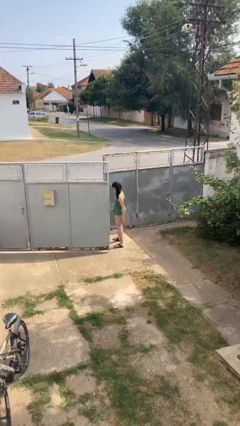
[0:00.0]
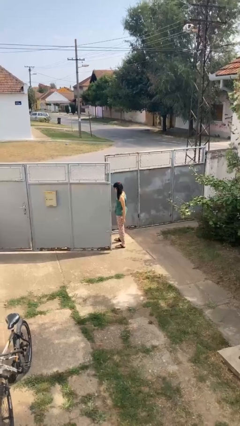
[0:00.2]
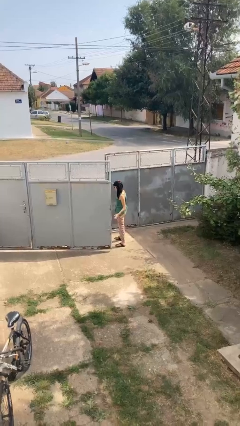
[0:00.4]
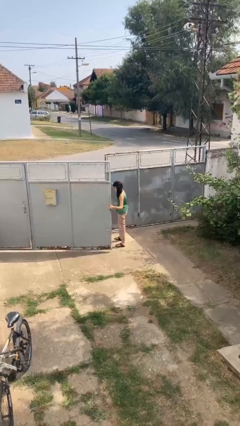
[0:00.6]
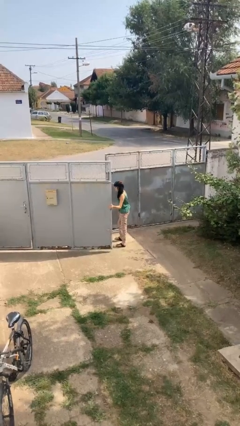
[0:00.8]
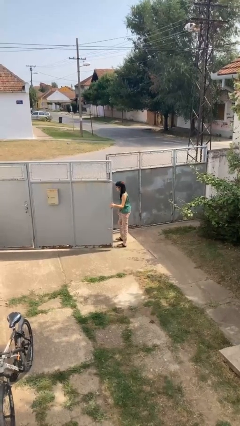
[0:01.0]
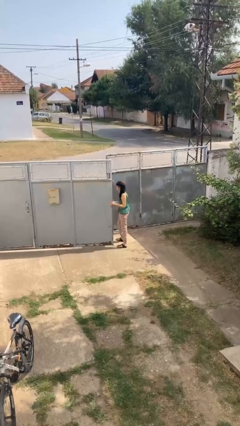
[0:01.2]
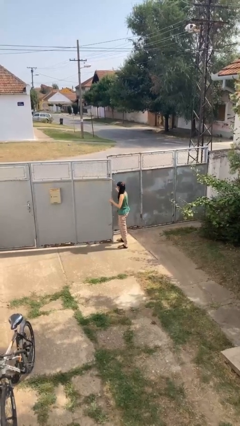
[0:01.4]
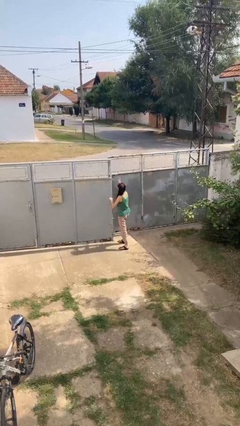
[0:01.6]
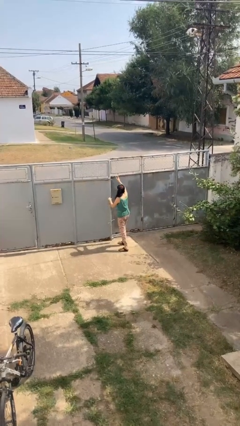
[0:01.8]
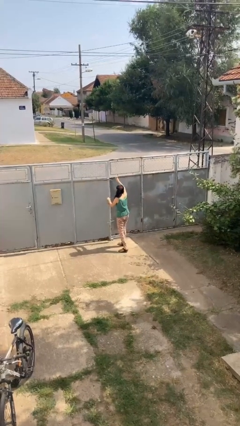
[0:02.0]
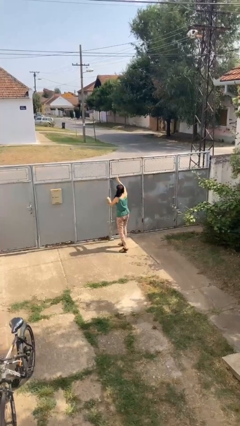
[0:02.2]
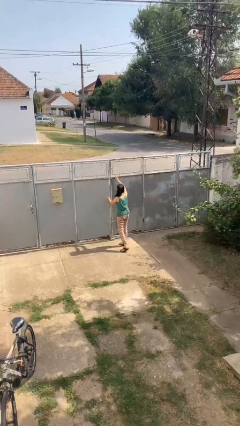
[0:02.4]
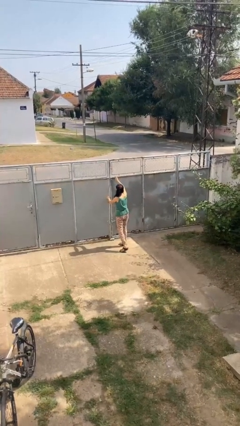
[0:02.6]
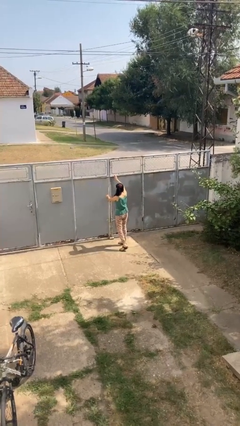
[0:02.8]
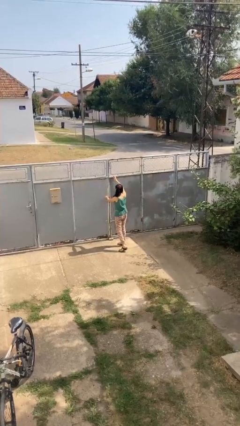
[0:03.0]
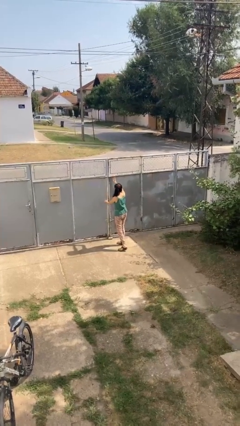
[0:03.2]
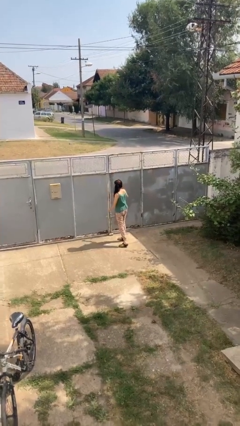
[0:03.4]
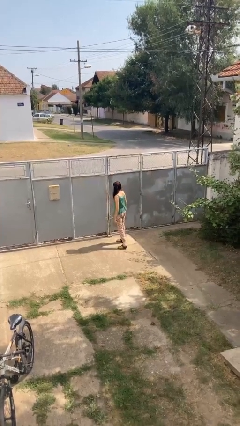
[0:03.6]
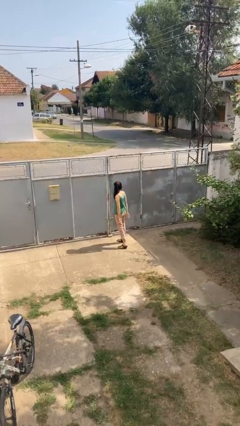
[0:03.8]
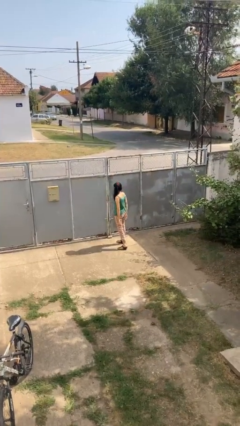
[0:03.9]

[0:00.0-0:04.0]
person closes gate

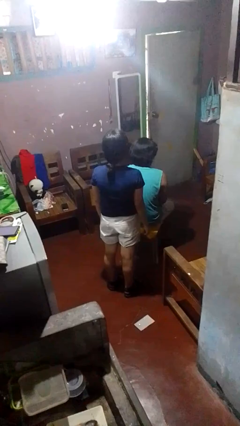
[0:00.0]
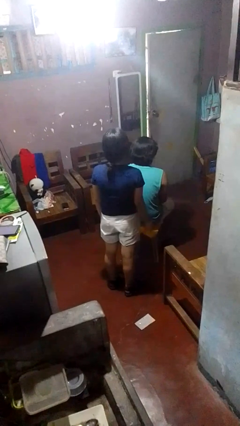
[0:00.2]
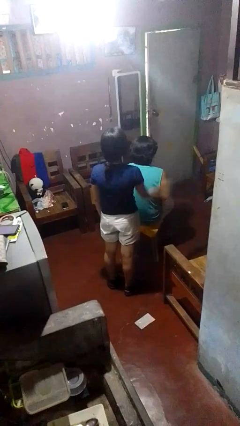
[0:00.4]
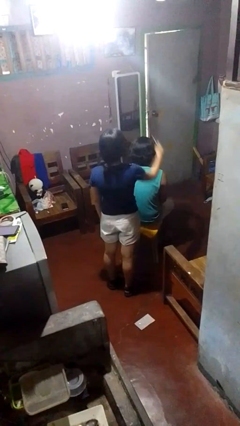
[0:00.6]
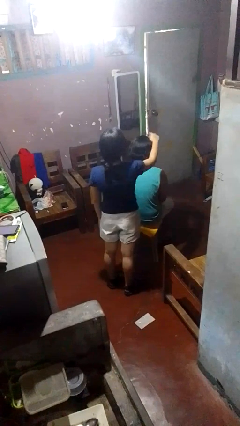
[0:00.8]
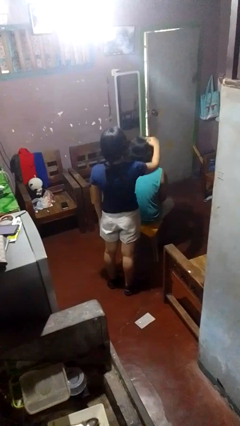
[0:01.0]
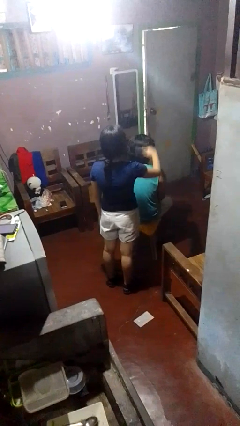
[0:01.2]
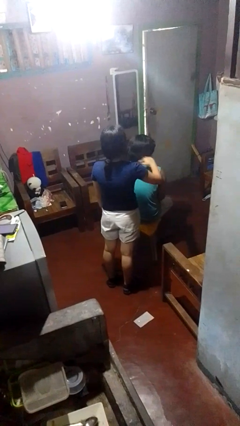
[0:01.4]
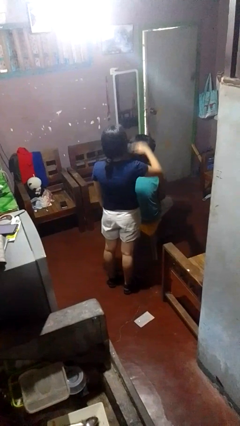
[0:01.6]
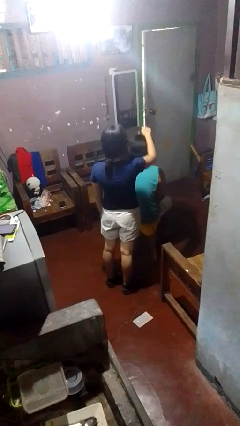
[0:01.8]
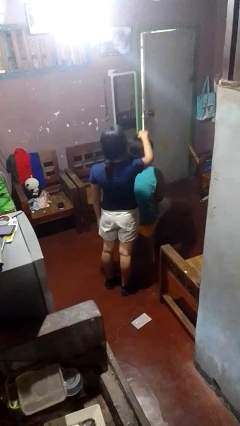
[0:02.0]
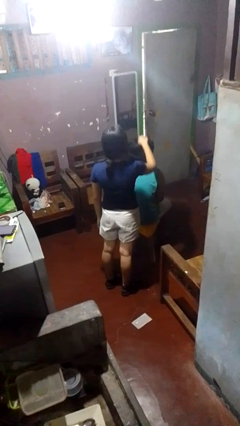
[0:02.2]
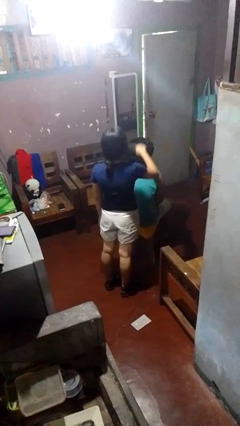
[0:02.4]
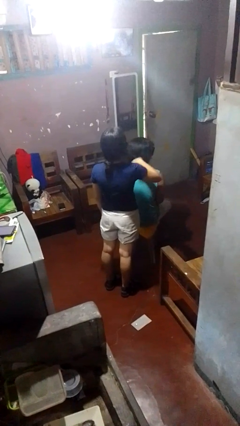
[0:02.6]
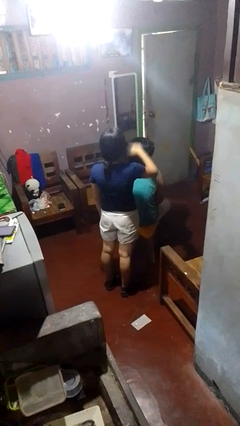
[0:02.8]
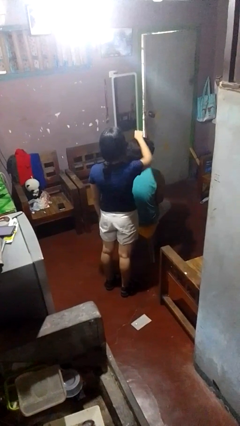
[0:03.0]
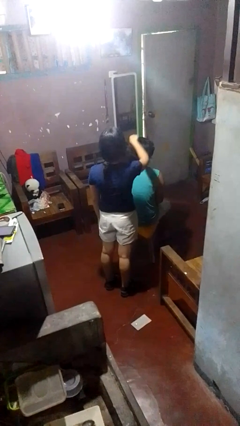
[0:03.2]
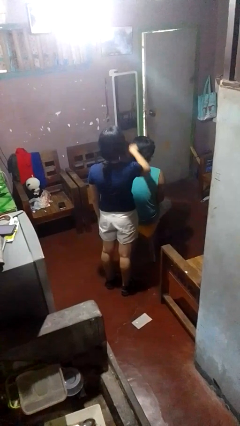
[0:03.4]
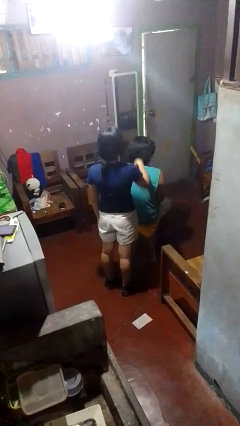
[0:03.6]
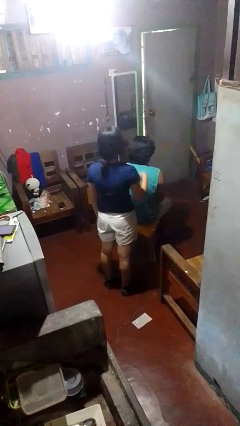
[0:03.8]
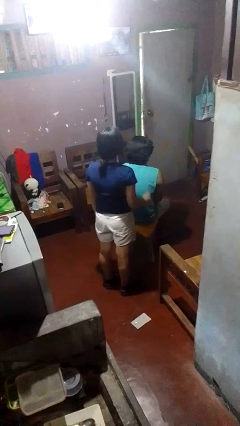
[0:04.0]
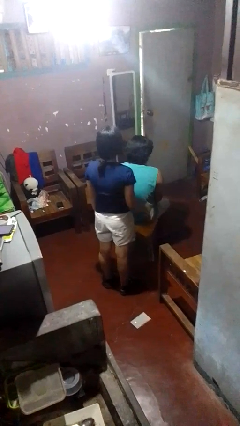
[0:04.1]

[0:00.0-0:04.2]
person brushes hair of person

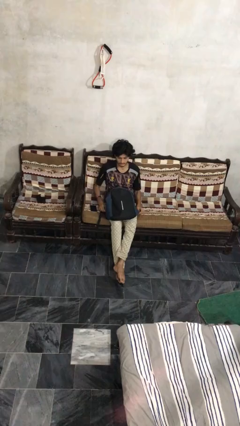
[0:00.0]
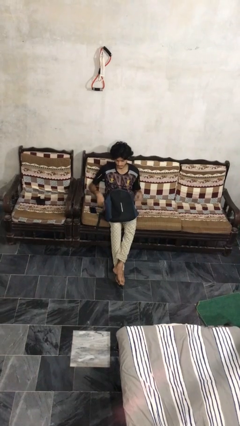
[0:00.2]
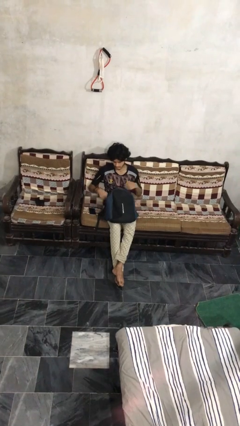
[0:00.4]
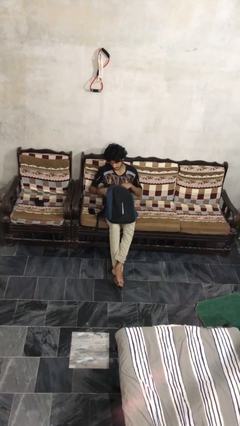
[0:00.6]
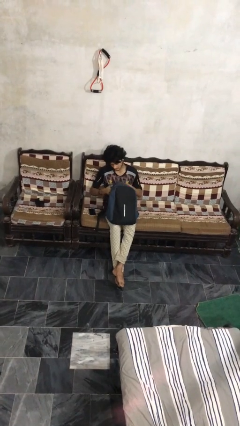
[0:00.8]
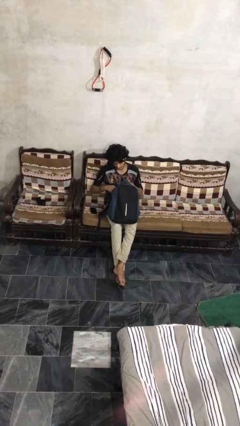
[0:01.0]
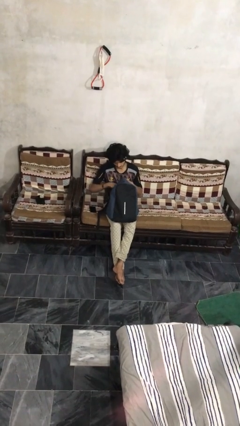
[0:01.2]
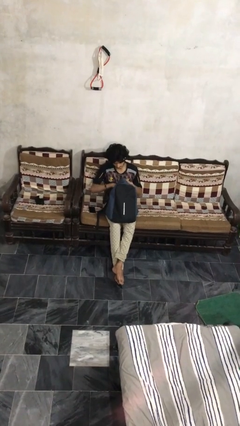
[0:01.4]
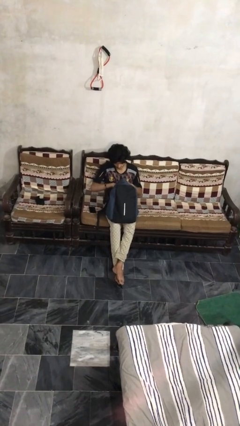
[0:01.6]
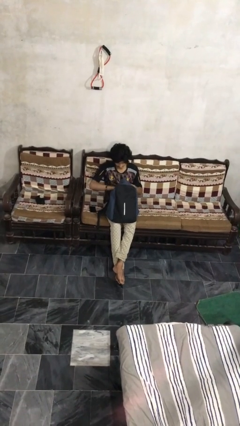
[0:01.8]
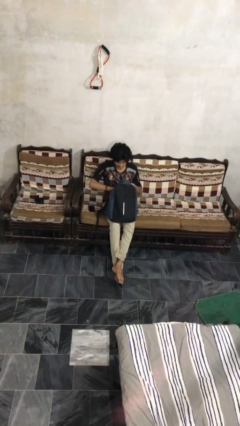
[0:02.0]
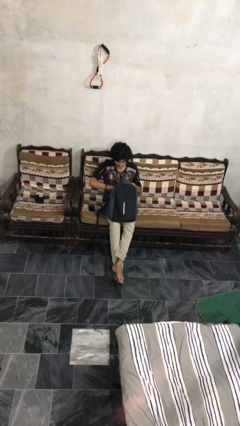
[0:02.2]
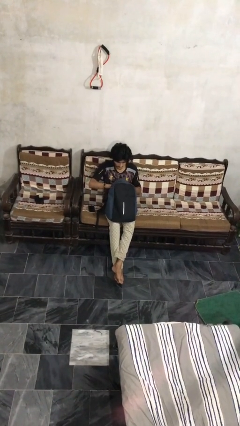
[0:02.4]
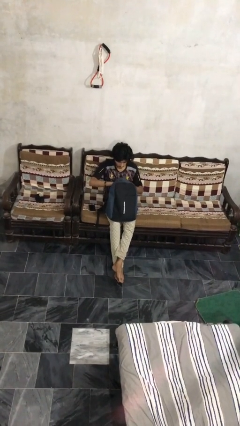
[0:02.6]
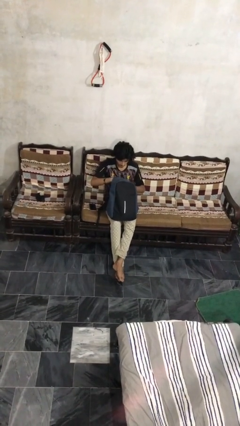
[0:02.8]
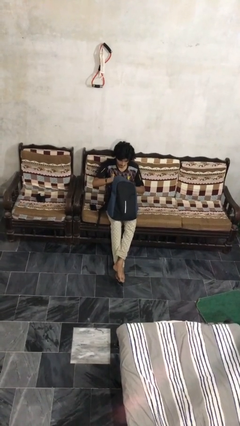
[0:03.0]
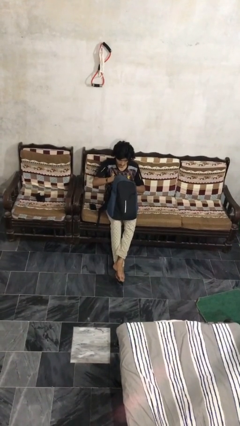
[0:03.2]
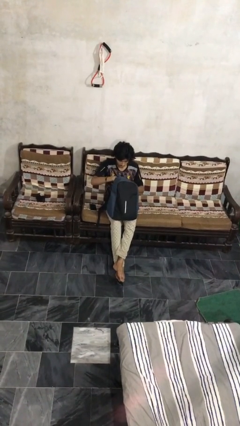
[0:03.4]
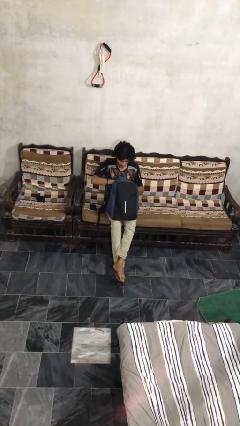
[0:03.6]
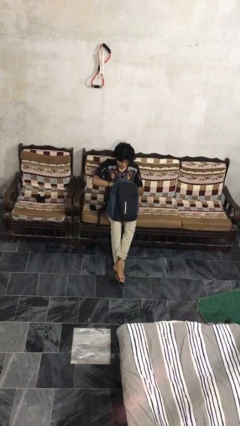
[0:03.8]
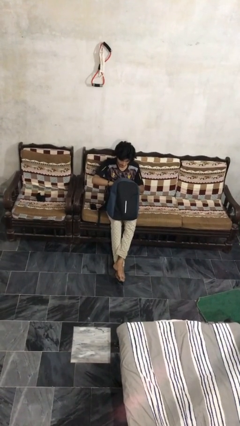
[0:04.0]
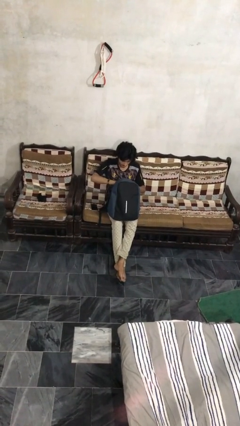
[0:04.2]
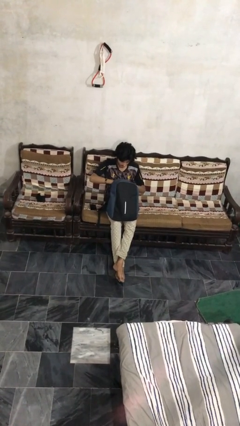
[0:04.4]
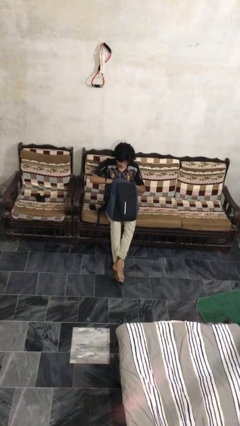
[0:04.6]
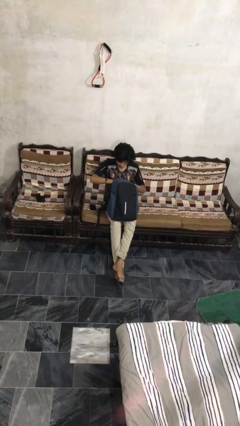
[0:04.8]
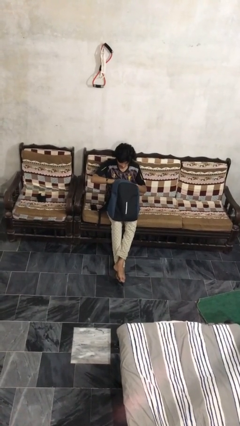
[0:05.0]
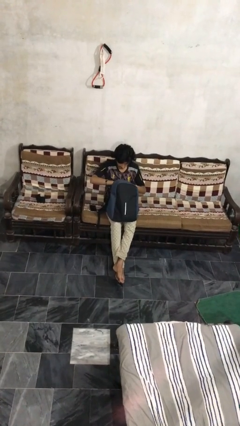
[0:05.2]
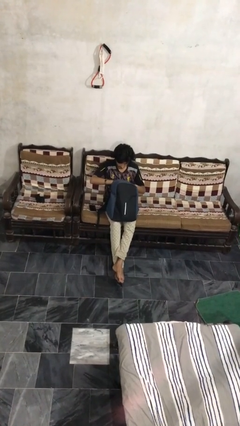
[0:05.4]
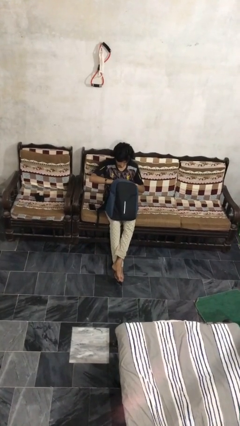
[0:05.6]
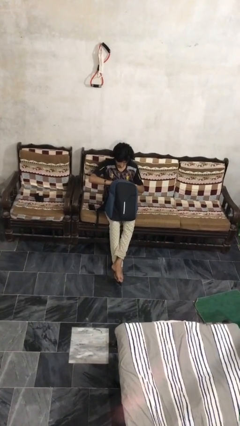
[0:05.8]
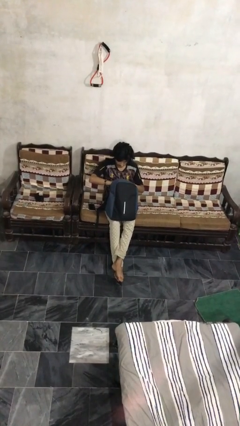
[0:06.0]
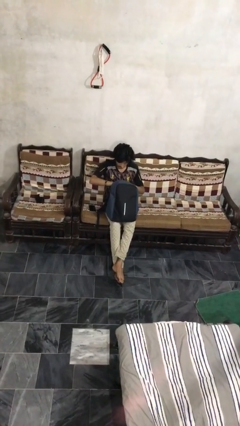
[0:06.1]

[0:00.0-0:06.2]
person searches in backpack

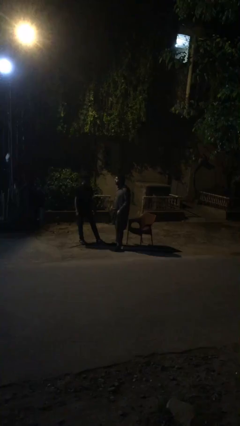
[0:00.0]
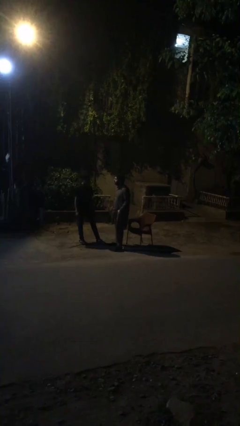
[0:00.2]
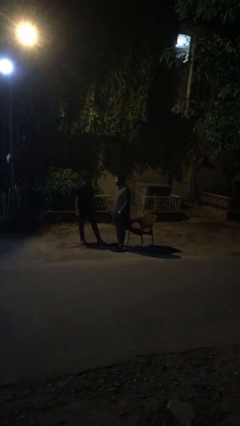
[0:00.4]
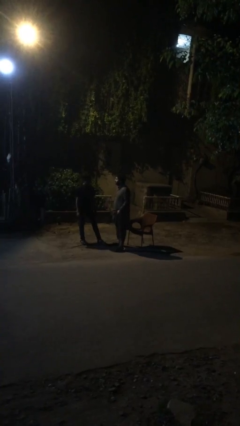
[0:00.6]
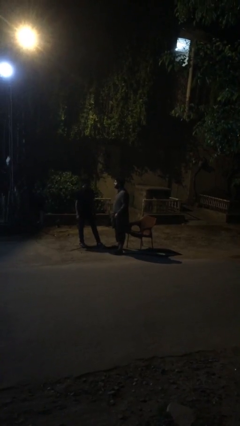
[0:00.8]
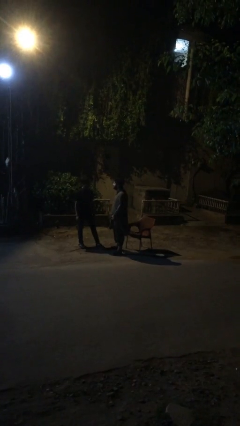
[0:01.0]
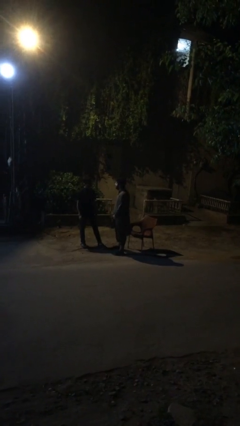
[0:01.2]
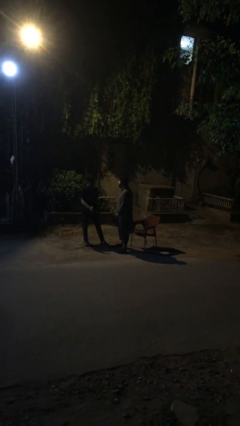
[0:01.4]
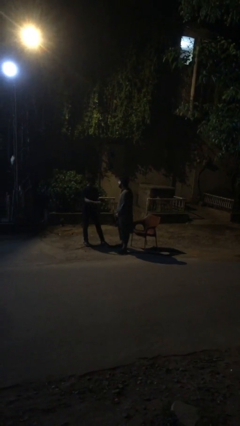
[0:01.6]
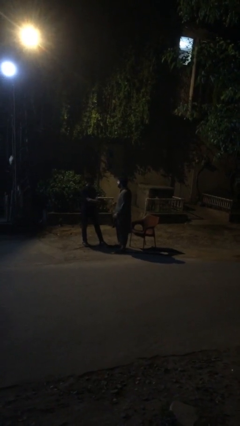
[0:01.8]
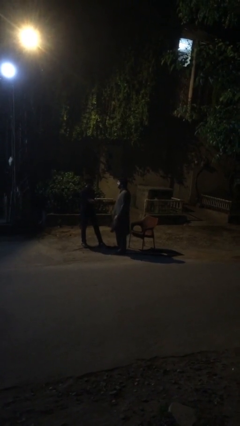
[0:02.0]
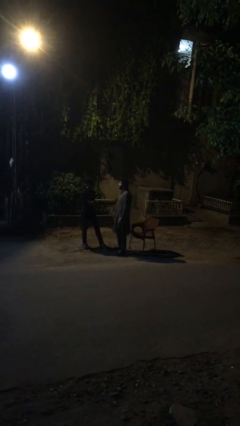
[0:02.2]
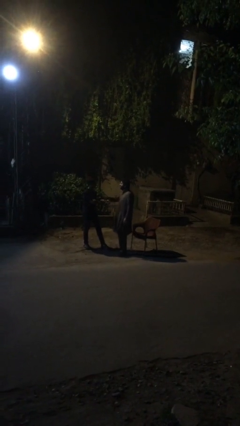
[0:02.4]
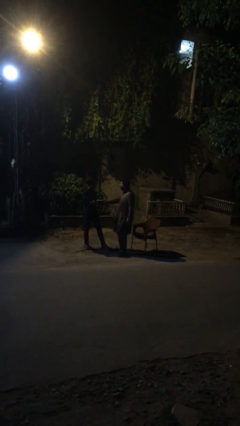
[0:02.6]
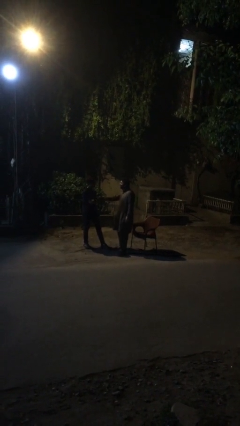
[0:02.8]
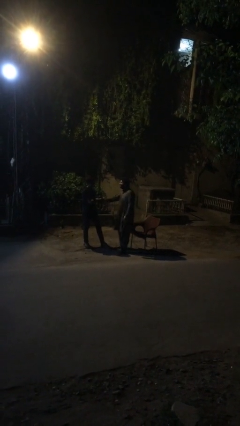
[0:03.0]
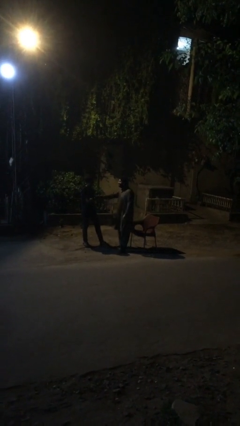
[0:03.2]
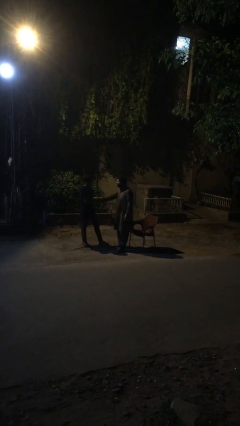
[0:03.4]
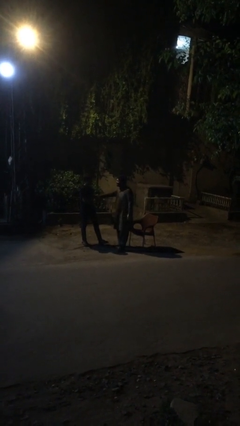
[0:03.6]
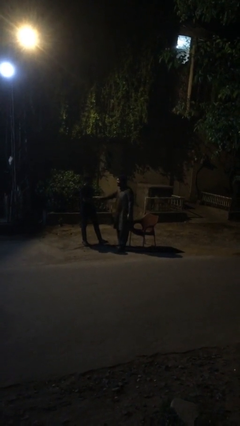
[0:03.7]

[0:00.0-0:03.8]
person shakes hand
